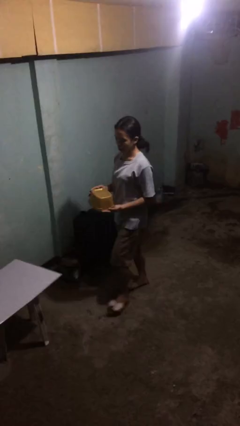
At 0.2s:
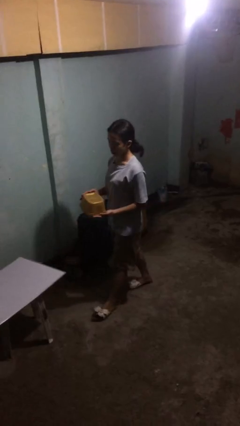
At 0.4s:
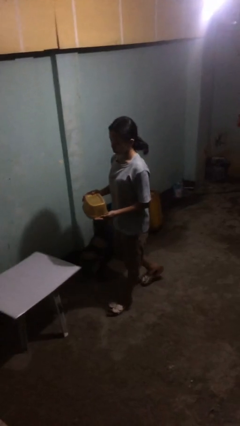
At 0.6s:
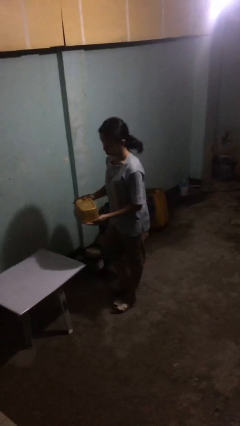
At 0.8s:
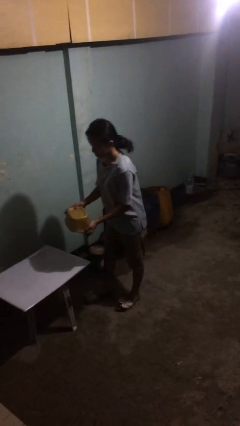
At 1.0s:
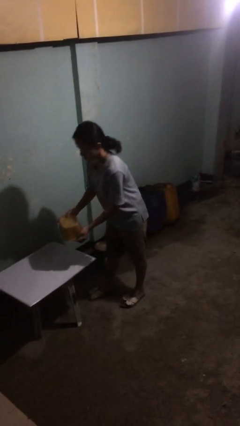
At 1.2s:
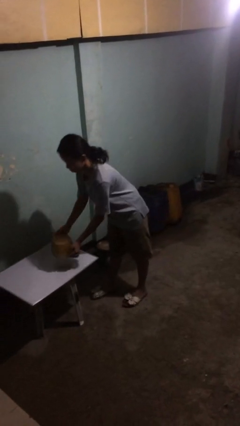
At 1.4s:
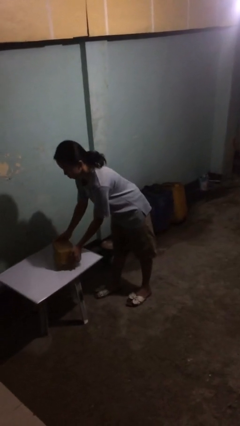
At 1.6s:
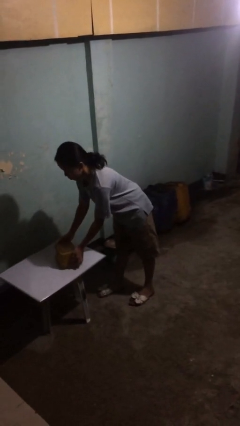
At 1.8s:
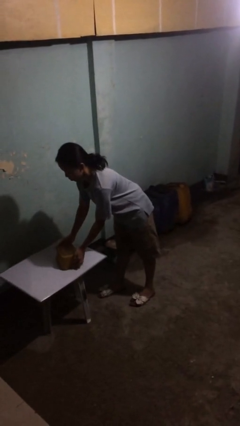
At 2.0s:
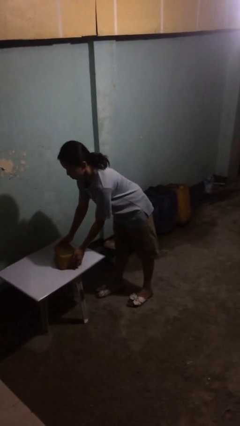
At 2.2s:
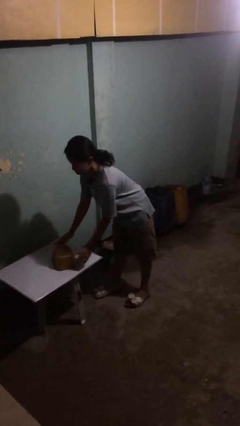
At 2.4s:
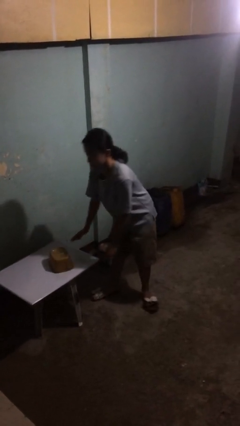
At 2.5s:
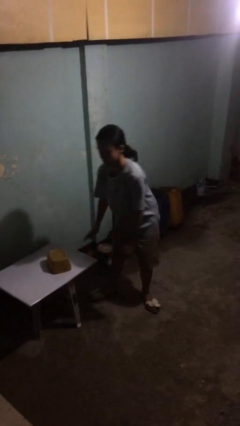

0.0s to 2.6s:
person puts down object on table

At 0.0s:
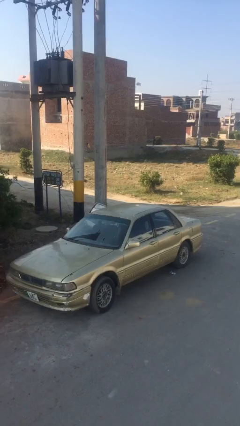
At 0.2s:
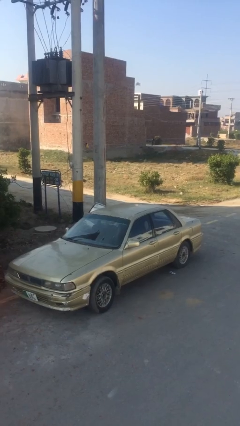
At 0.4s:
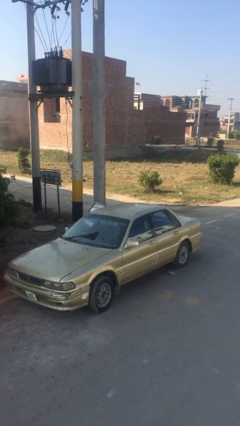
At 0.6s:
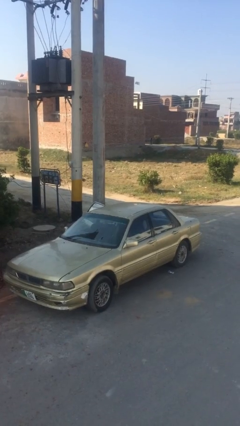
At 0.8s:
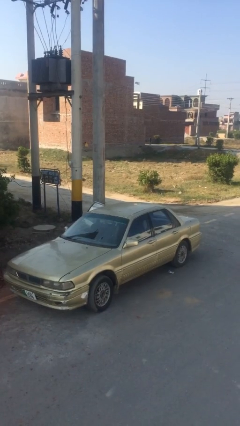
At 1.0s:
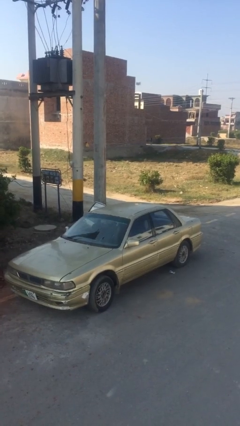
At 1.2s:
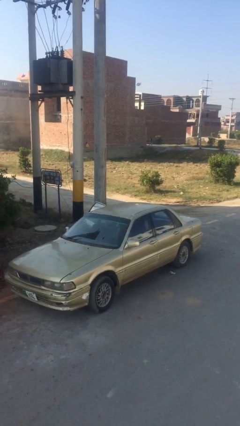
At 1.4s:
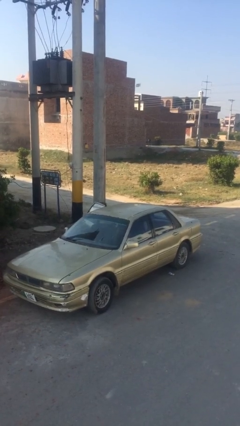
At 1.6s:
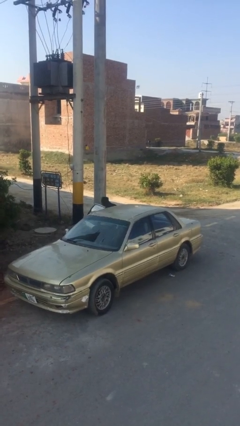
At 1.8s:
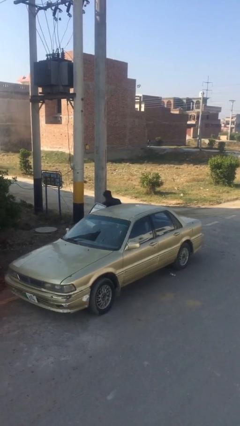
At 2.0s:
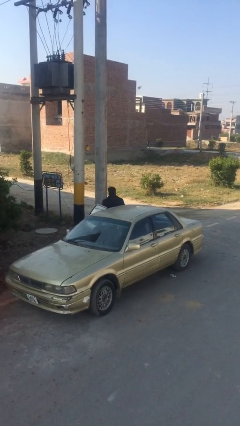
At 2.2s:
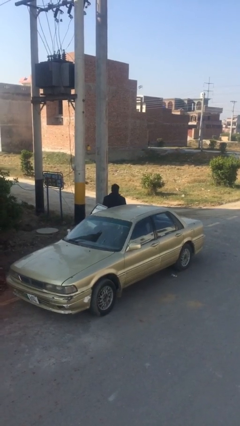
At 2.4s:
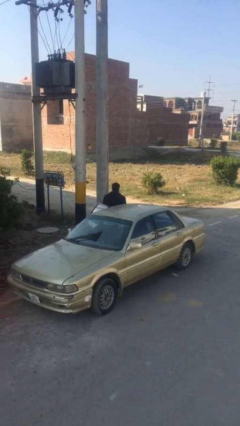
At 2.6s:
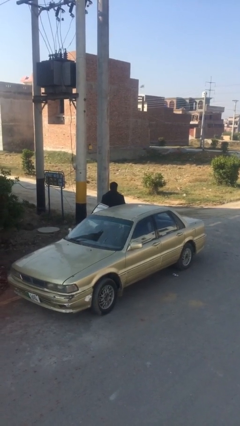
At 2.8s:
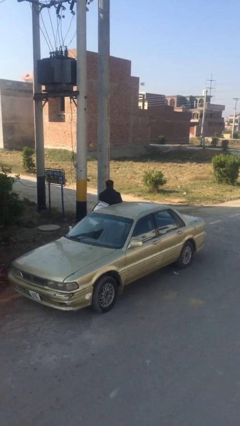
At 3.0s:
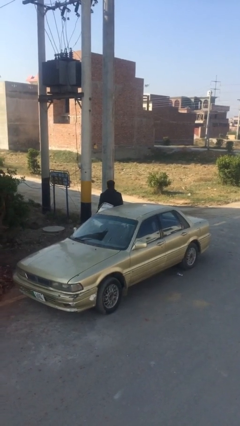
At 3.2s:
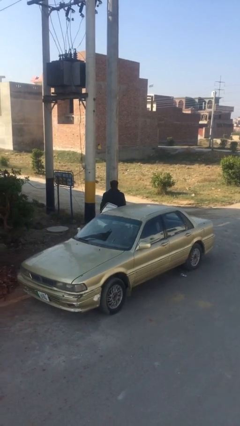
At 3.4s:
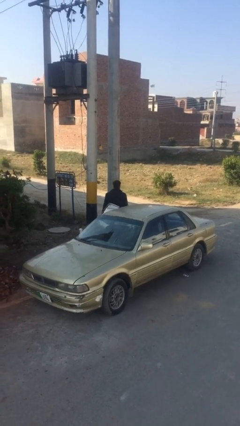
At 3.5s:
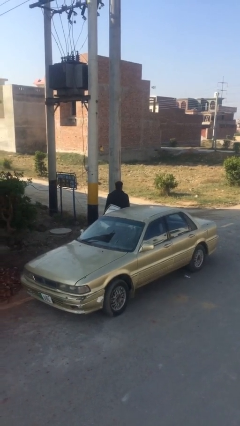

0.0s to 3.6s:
person exits car

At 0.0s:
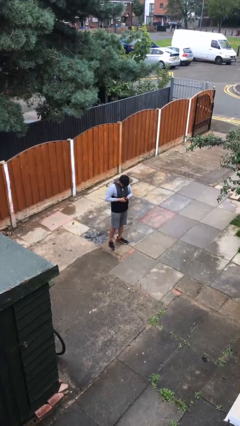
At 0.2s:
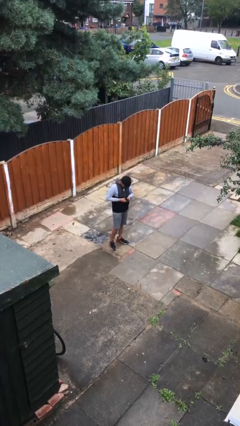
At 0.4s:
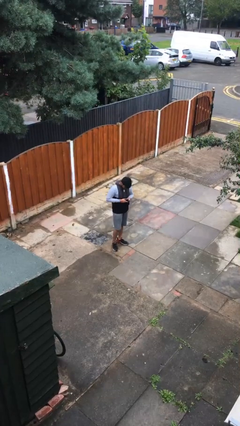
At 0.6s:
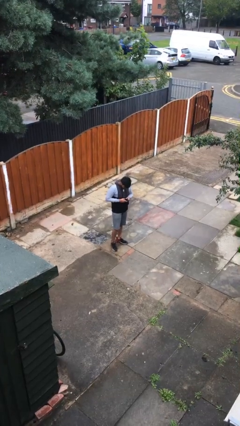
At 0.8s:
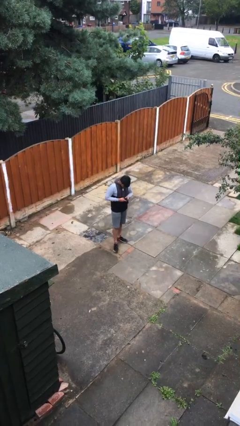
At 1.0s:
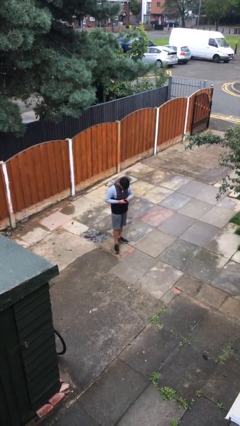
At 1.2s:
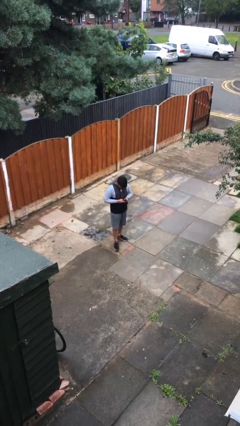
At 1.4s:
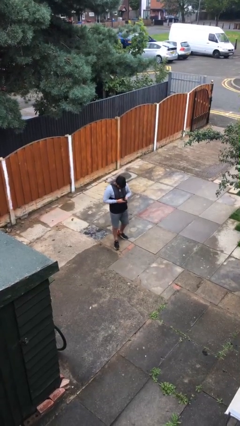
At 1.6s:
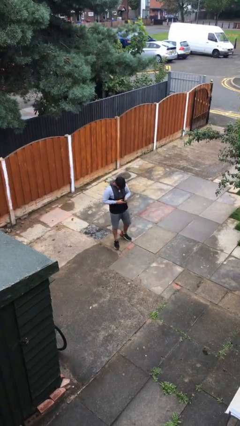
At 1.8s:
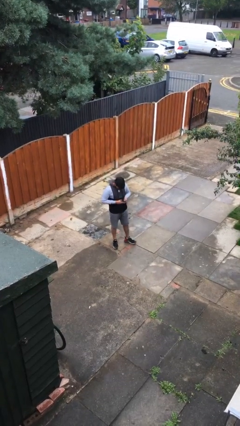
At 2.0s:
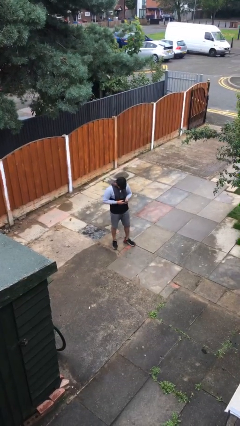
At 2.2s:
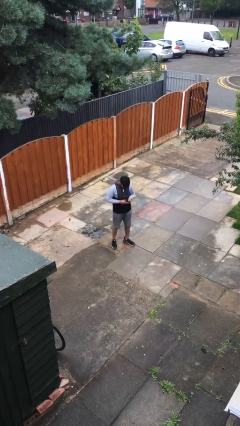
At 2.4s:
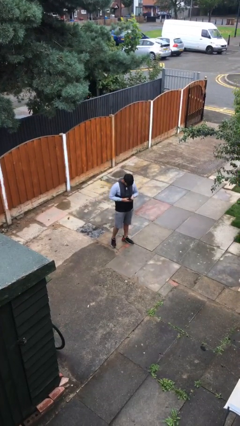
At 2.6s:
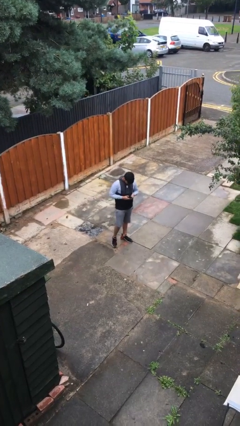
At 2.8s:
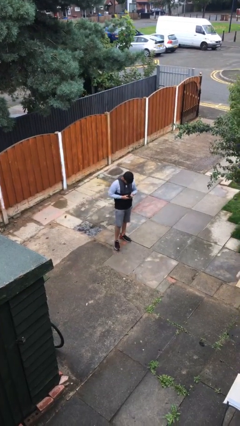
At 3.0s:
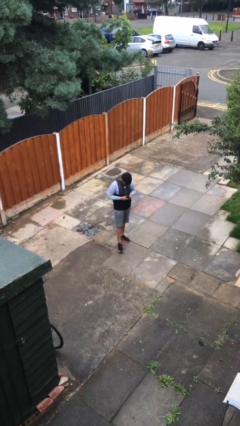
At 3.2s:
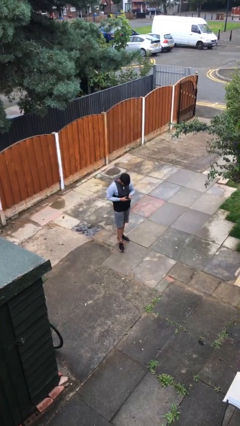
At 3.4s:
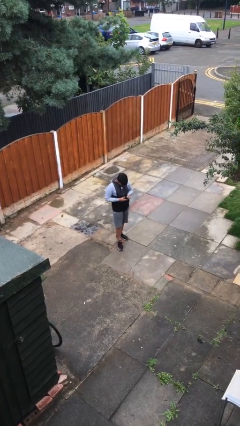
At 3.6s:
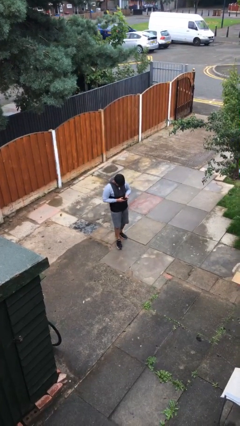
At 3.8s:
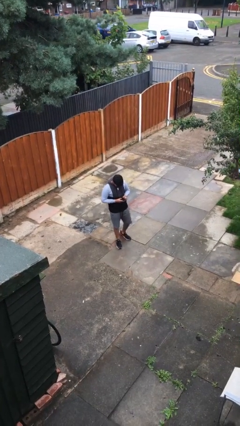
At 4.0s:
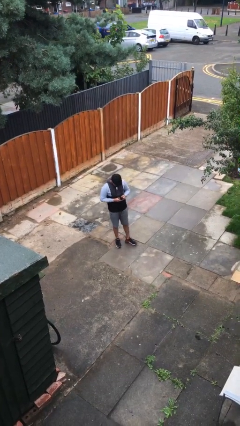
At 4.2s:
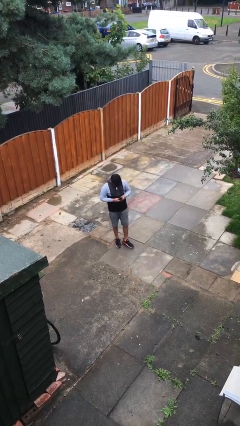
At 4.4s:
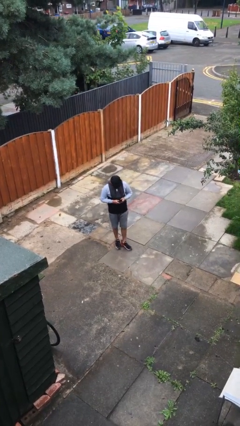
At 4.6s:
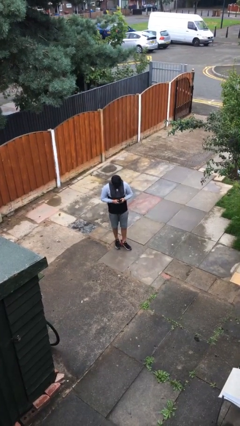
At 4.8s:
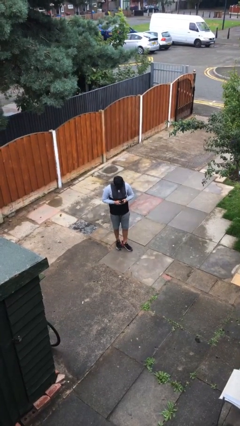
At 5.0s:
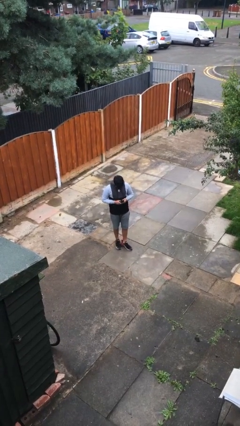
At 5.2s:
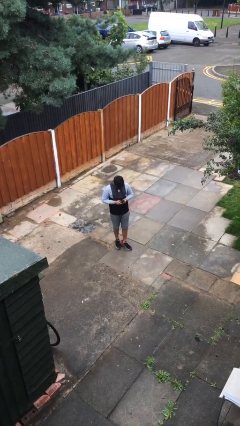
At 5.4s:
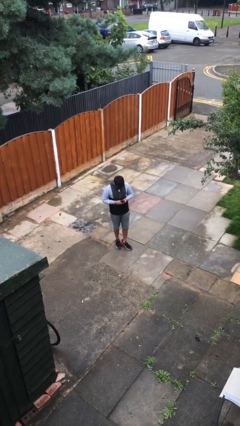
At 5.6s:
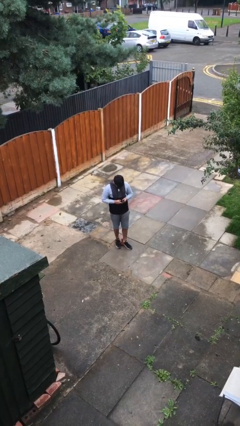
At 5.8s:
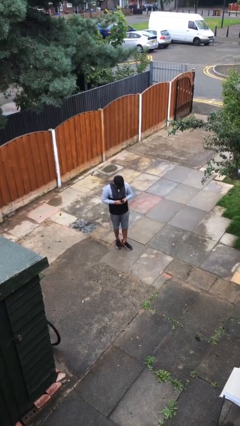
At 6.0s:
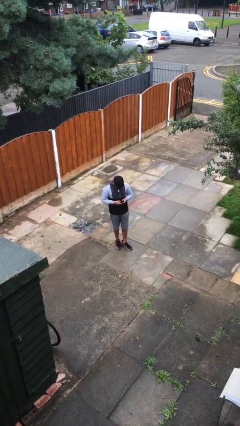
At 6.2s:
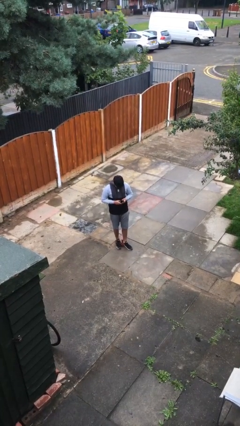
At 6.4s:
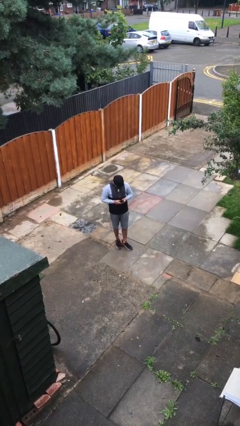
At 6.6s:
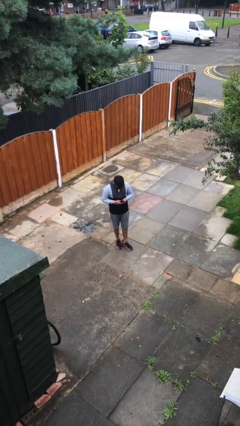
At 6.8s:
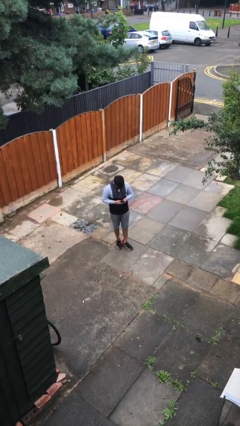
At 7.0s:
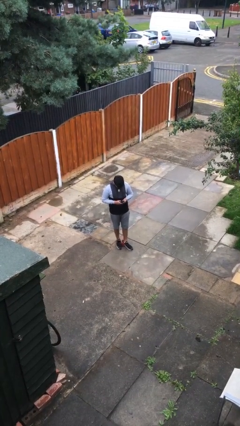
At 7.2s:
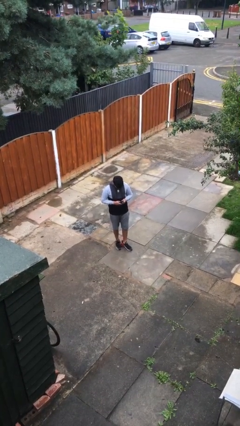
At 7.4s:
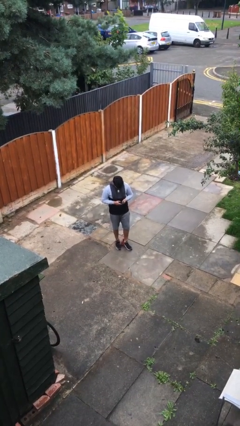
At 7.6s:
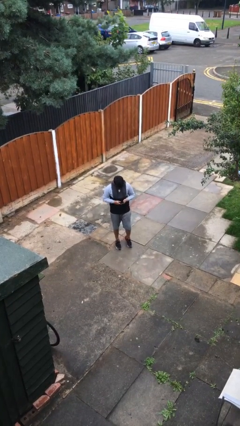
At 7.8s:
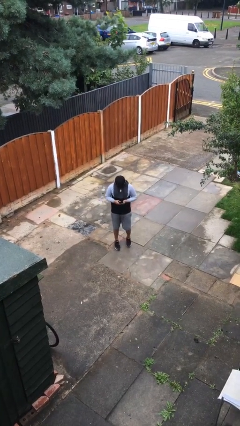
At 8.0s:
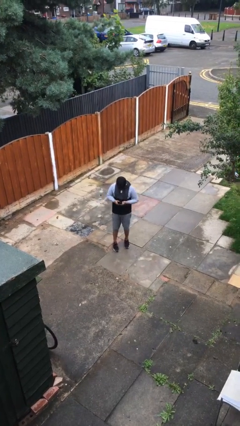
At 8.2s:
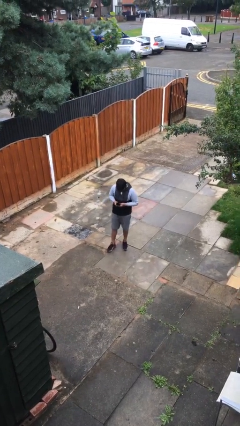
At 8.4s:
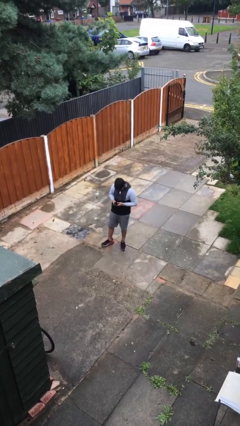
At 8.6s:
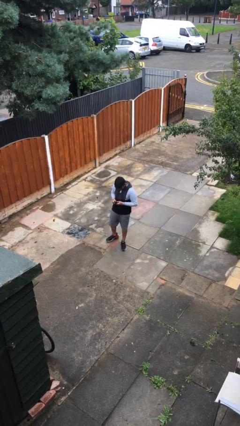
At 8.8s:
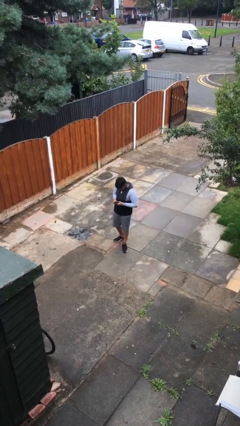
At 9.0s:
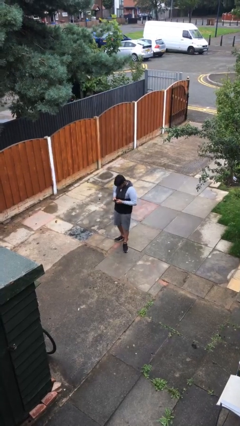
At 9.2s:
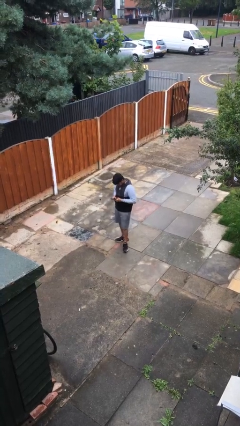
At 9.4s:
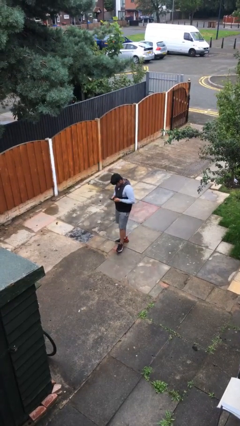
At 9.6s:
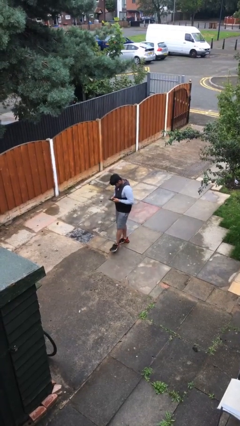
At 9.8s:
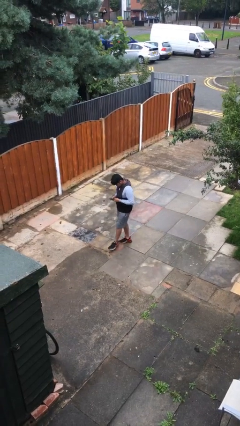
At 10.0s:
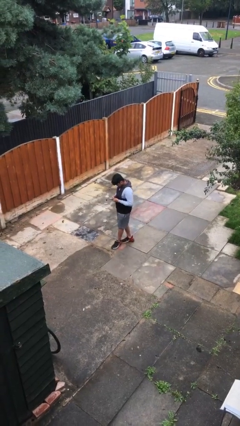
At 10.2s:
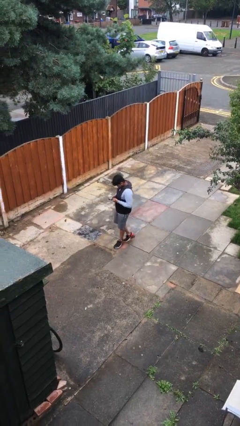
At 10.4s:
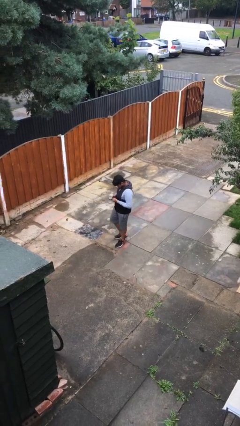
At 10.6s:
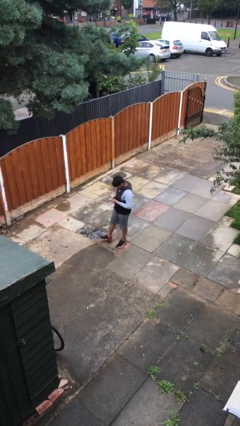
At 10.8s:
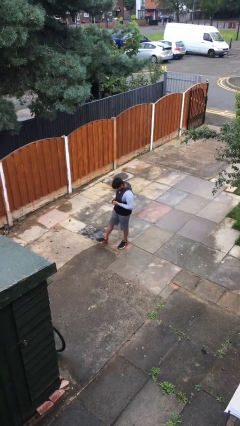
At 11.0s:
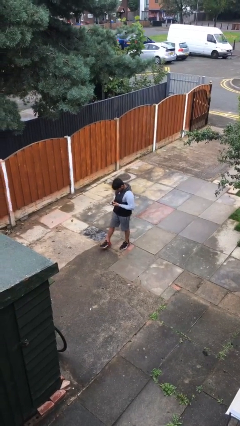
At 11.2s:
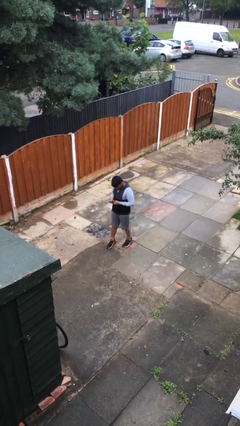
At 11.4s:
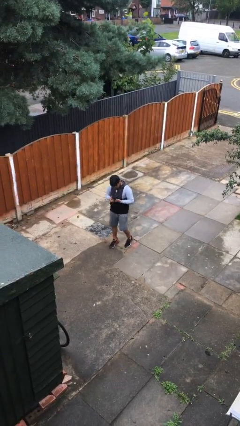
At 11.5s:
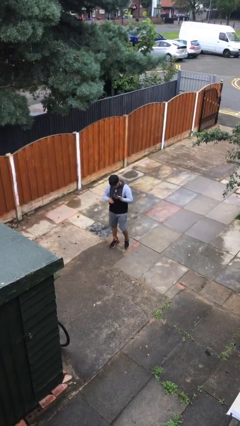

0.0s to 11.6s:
person texts on phone
